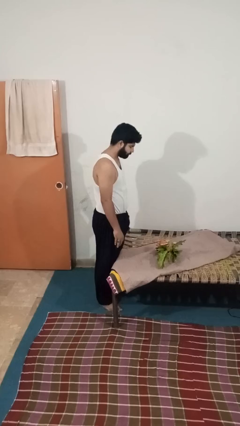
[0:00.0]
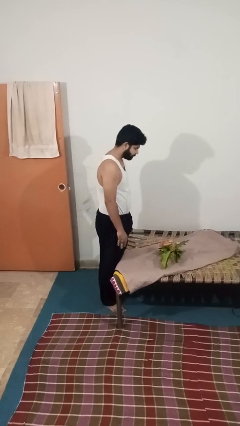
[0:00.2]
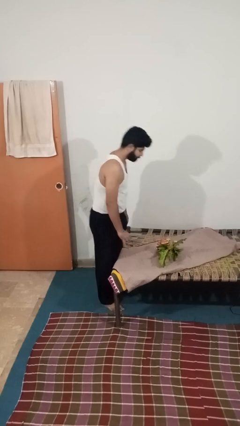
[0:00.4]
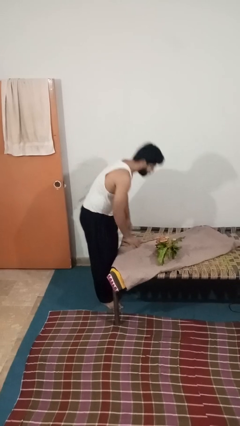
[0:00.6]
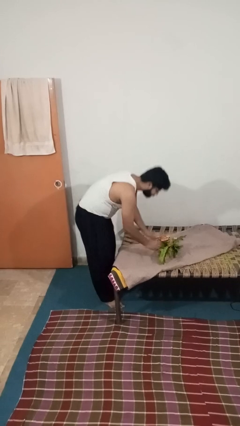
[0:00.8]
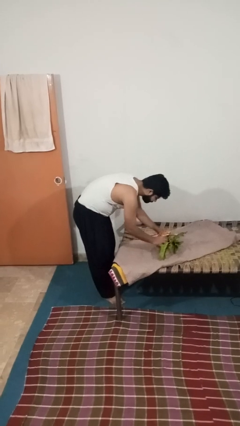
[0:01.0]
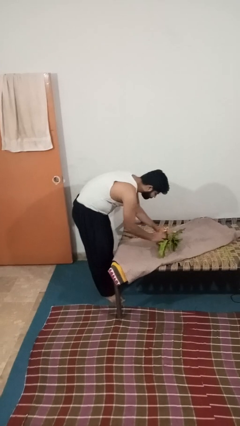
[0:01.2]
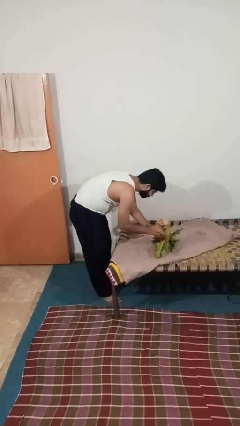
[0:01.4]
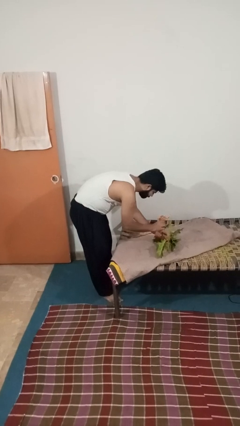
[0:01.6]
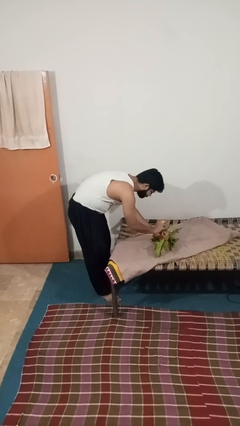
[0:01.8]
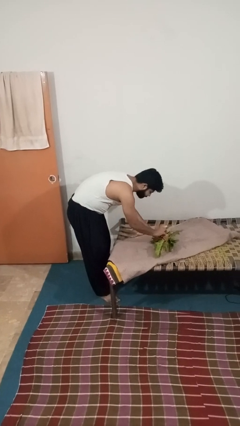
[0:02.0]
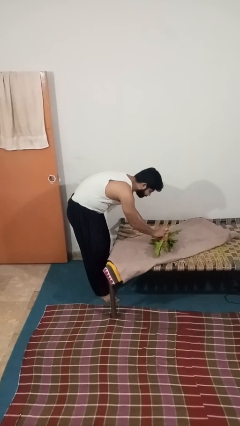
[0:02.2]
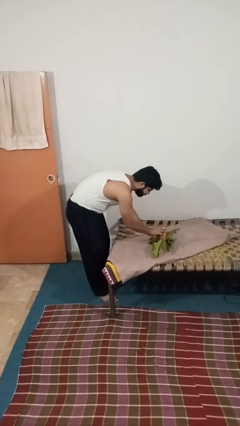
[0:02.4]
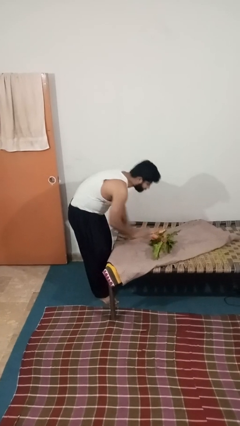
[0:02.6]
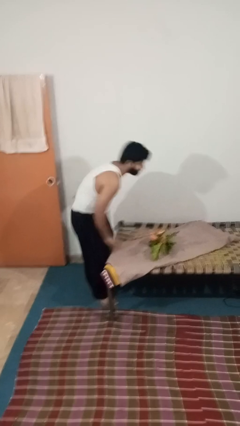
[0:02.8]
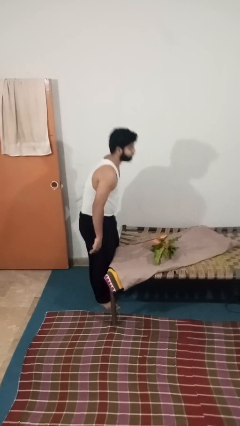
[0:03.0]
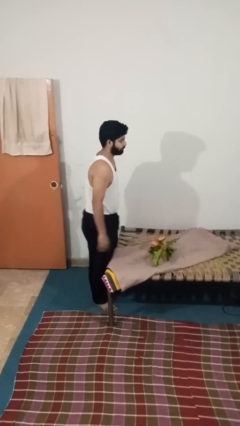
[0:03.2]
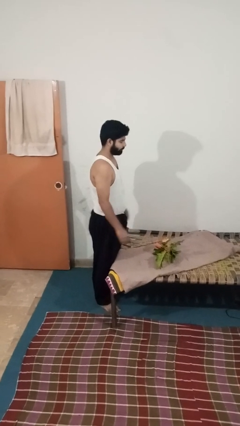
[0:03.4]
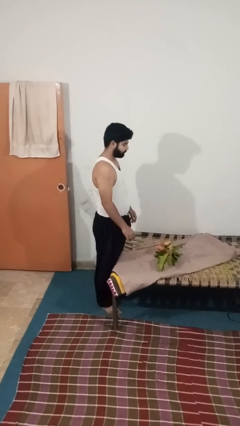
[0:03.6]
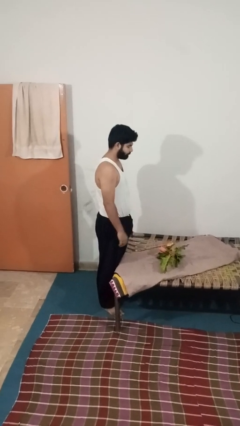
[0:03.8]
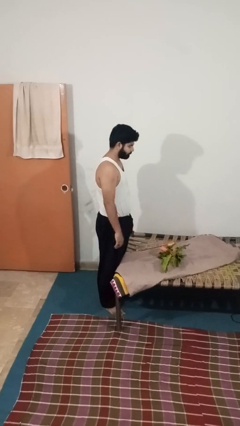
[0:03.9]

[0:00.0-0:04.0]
person climbs on chair

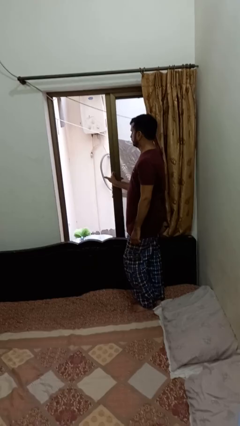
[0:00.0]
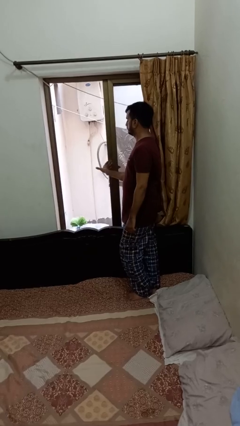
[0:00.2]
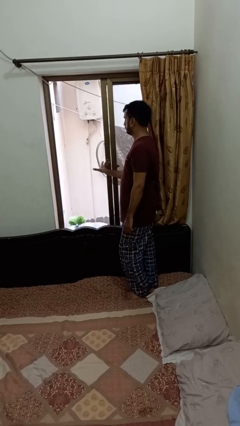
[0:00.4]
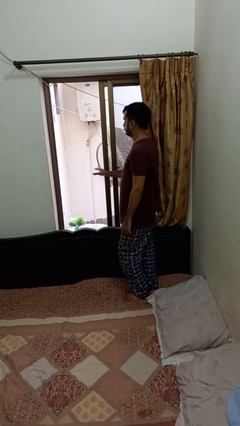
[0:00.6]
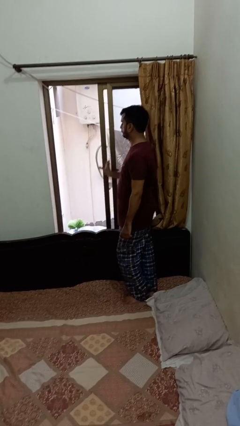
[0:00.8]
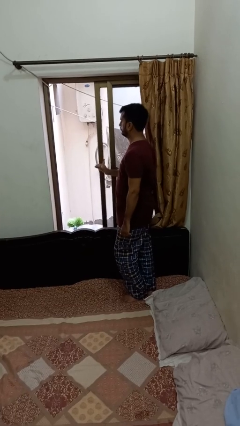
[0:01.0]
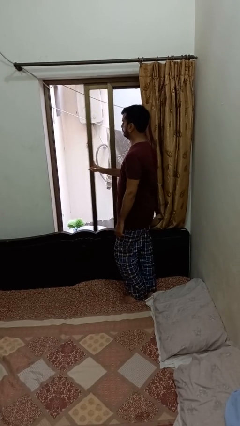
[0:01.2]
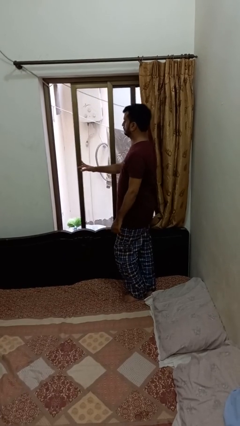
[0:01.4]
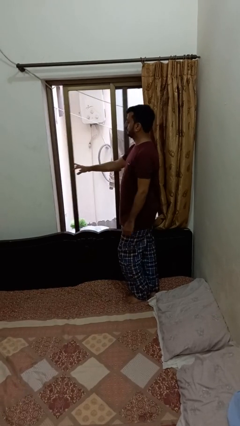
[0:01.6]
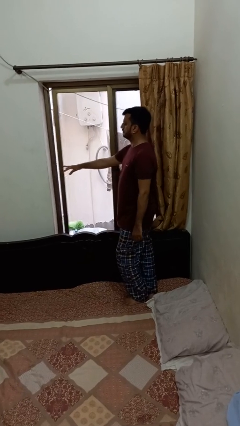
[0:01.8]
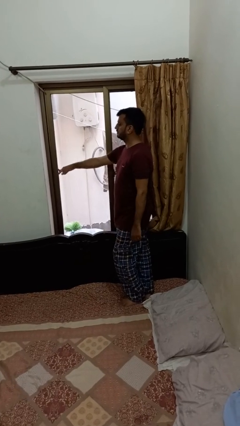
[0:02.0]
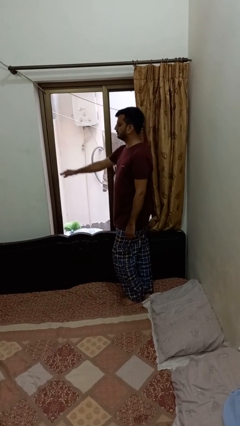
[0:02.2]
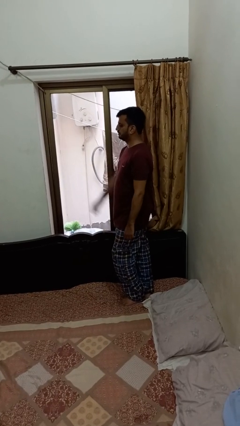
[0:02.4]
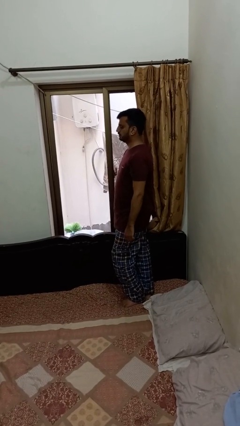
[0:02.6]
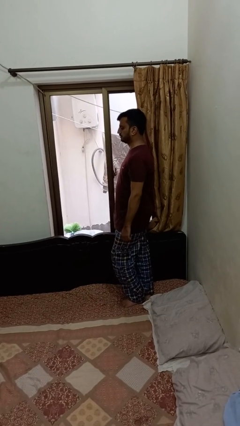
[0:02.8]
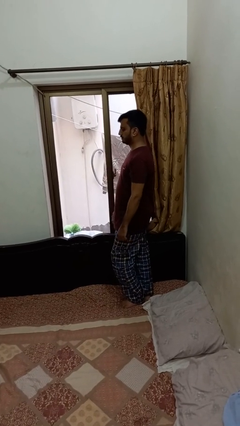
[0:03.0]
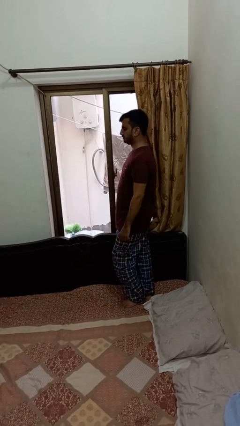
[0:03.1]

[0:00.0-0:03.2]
person closes home window

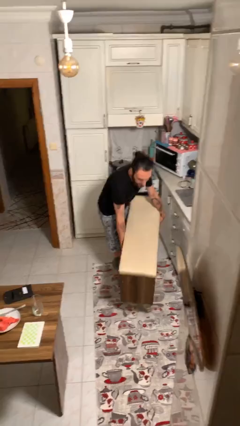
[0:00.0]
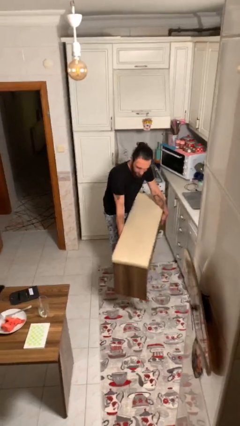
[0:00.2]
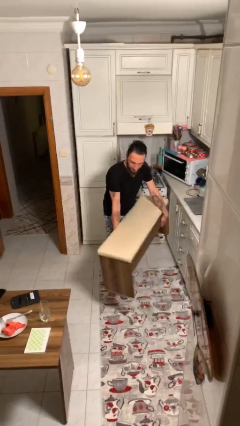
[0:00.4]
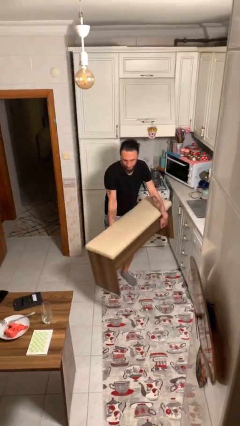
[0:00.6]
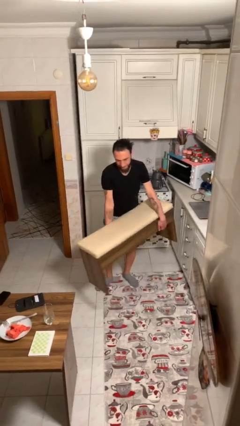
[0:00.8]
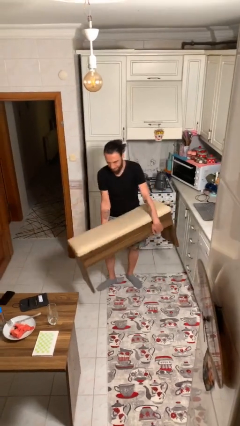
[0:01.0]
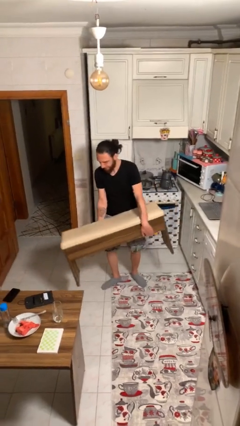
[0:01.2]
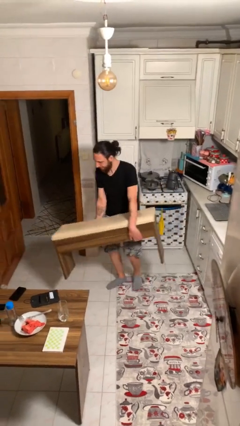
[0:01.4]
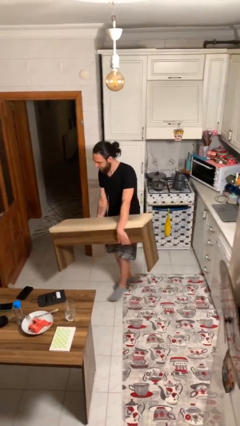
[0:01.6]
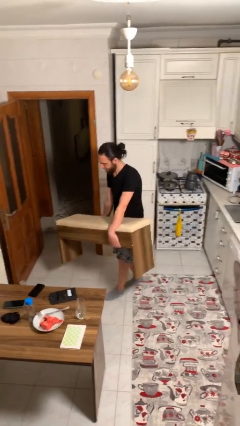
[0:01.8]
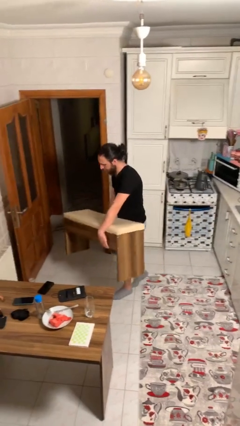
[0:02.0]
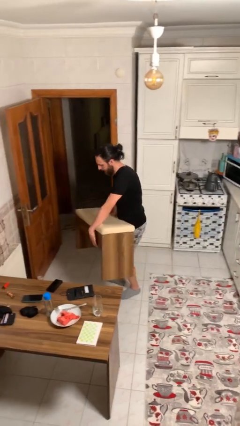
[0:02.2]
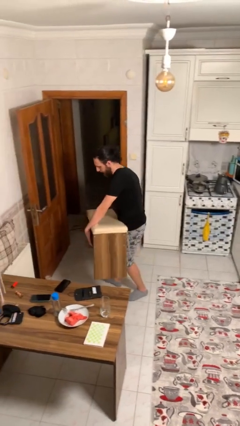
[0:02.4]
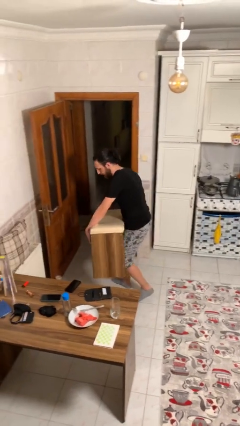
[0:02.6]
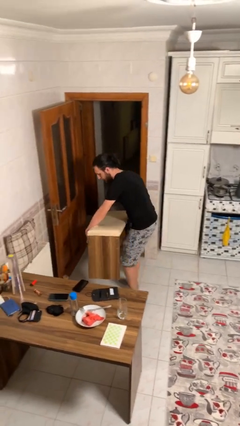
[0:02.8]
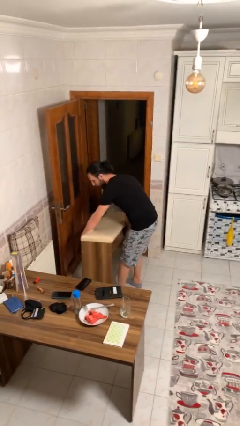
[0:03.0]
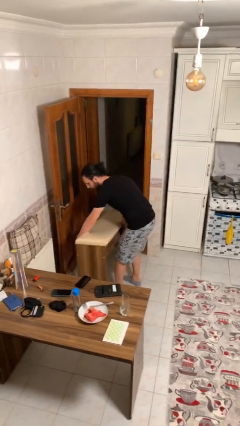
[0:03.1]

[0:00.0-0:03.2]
person carries heavy object

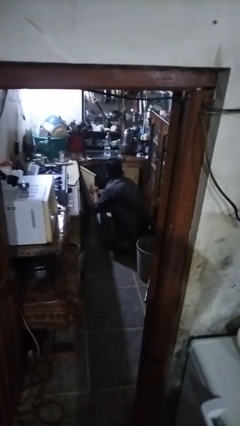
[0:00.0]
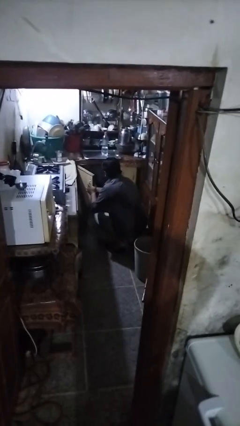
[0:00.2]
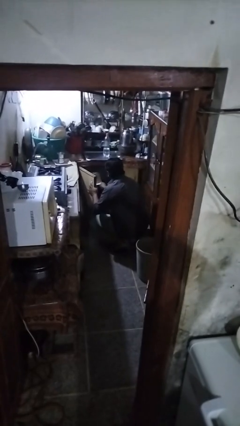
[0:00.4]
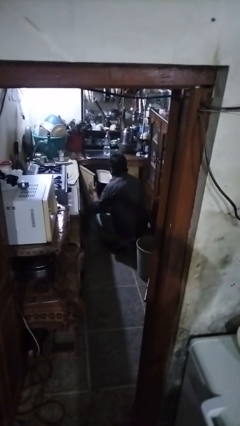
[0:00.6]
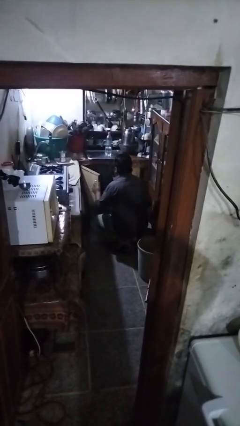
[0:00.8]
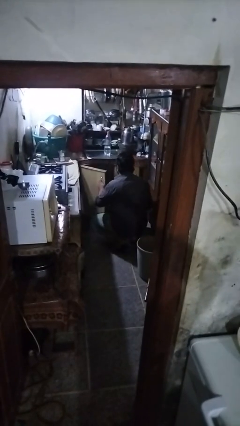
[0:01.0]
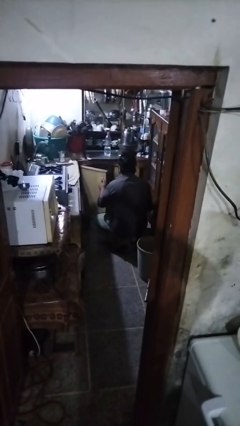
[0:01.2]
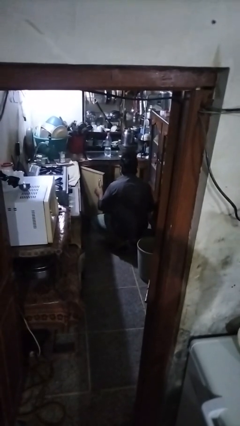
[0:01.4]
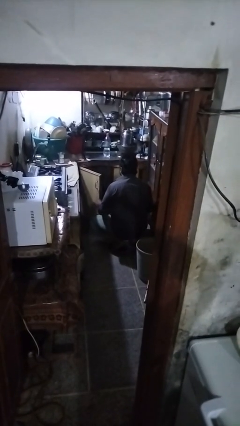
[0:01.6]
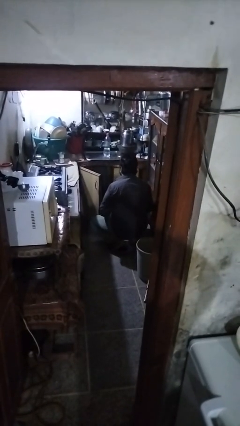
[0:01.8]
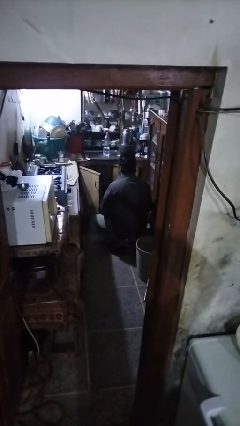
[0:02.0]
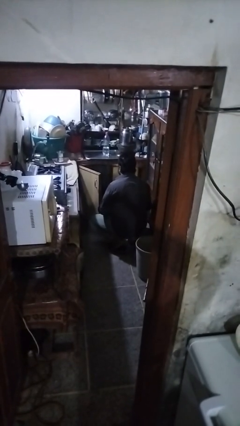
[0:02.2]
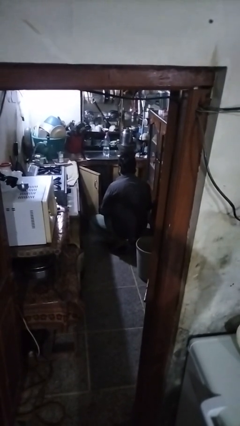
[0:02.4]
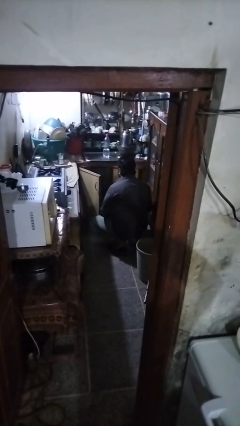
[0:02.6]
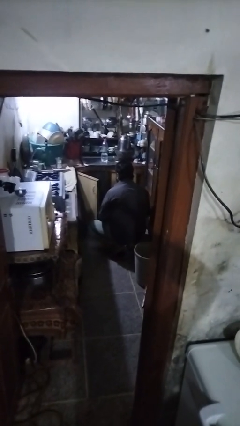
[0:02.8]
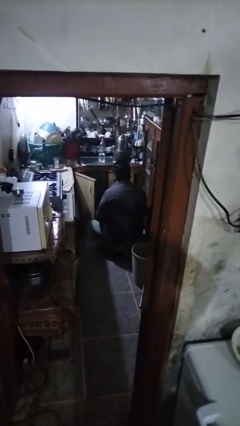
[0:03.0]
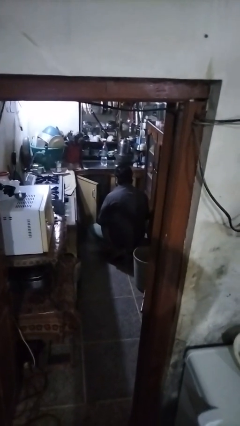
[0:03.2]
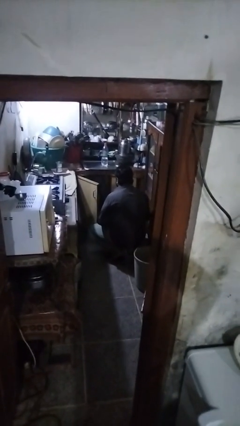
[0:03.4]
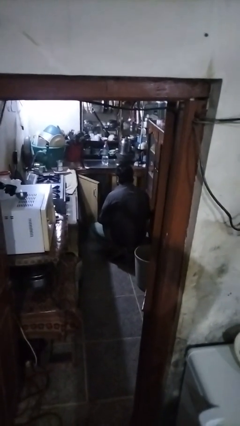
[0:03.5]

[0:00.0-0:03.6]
person takes object from cabinet

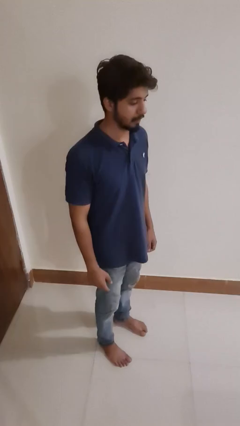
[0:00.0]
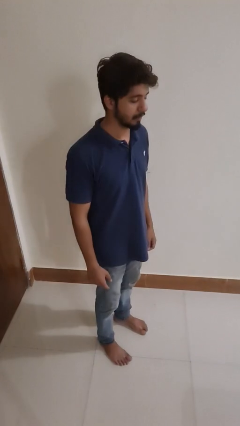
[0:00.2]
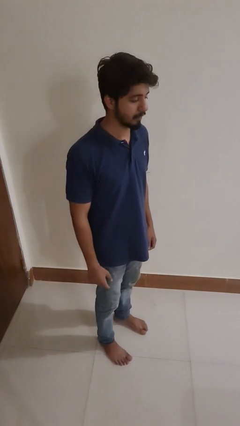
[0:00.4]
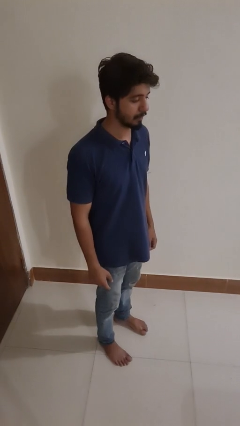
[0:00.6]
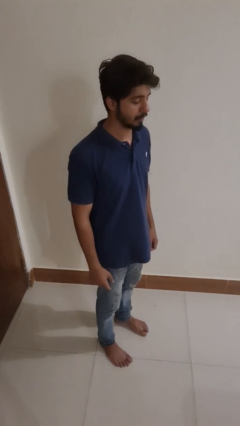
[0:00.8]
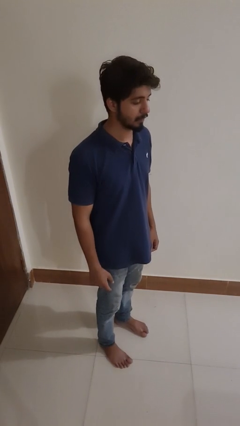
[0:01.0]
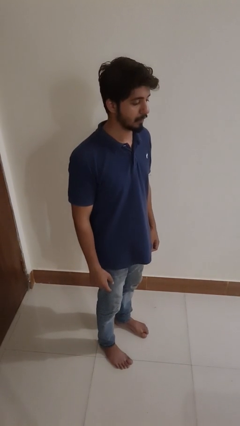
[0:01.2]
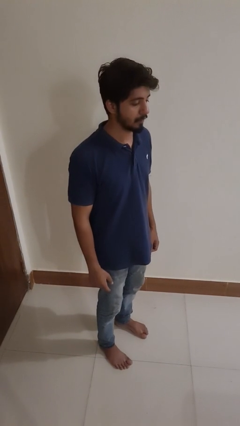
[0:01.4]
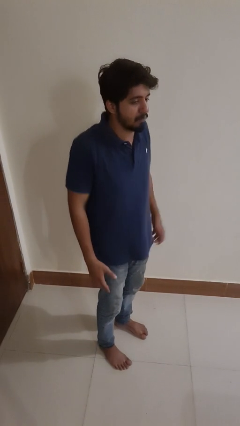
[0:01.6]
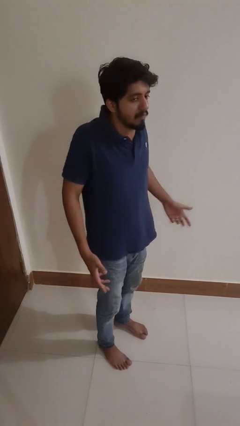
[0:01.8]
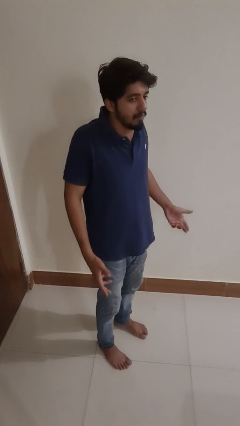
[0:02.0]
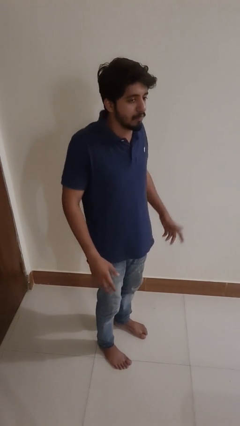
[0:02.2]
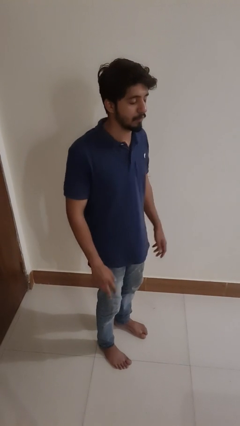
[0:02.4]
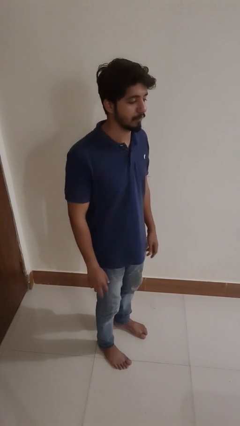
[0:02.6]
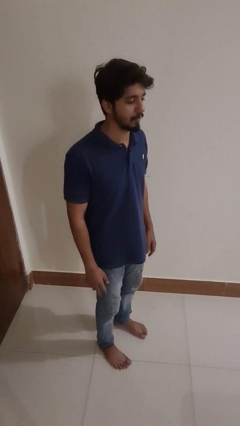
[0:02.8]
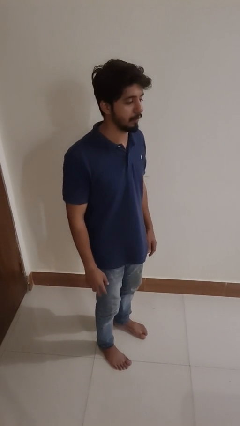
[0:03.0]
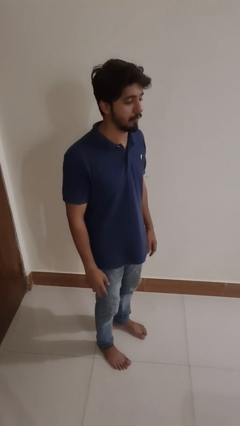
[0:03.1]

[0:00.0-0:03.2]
person shrugs

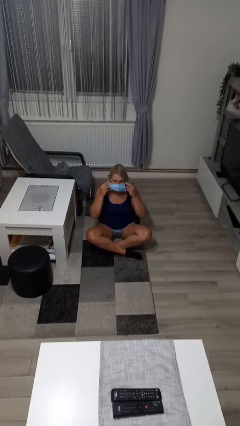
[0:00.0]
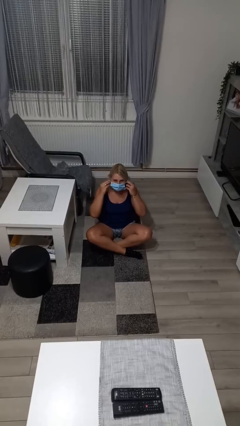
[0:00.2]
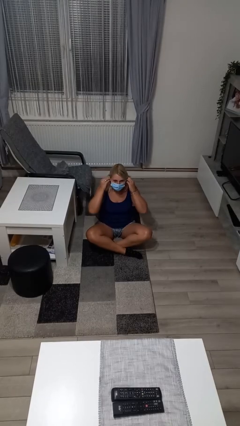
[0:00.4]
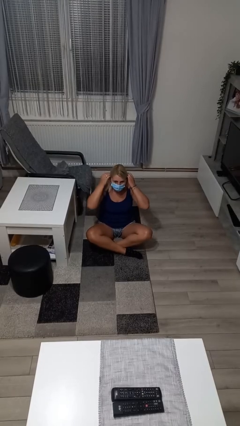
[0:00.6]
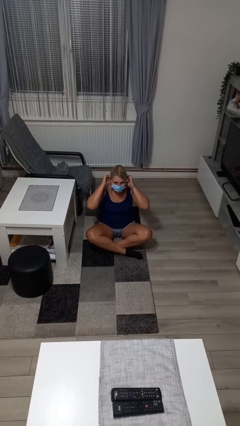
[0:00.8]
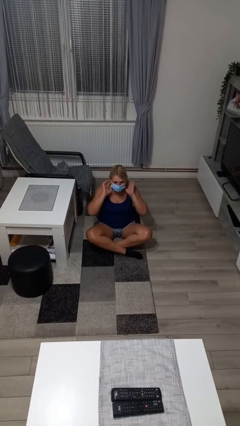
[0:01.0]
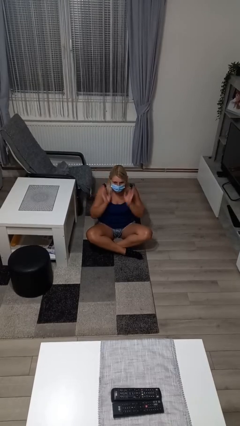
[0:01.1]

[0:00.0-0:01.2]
person puts on facemask
